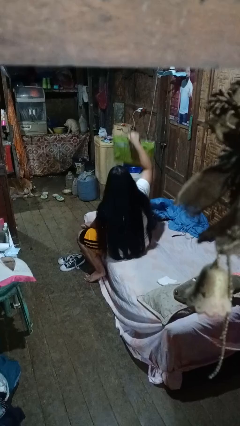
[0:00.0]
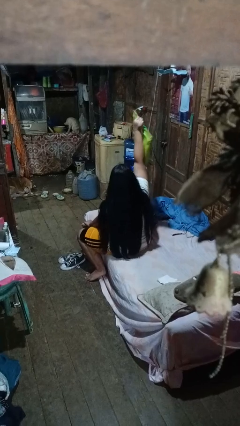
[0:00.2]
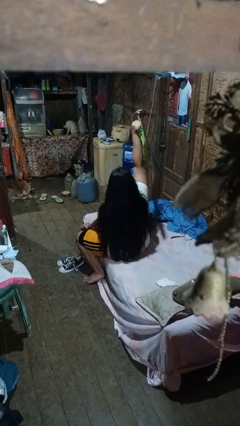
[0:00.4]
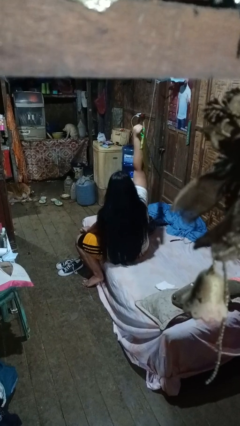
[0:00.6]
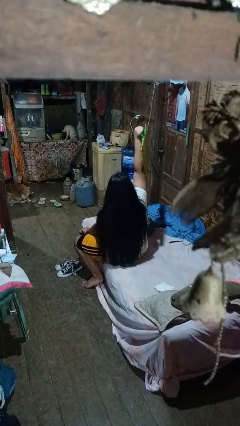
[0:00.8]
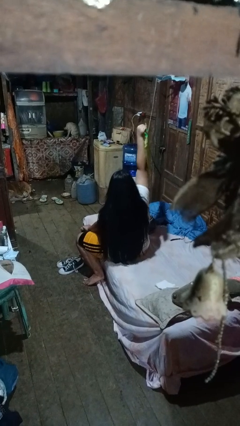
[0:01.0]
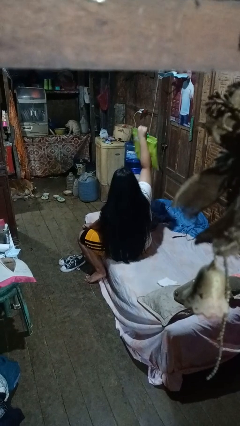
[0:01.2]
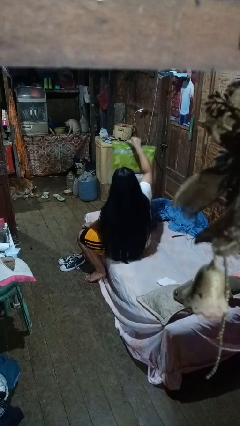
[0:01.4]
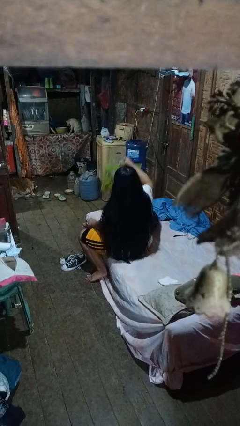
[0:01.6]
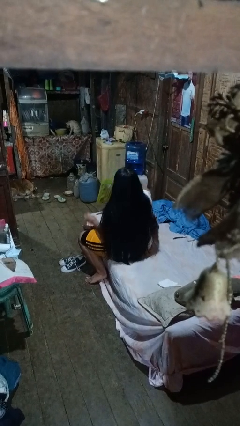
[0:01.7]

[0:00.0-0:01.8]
person holds object above head

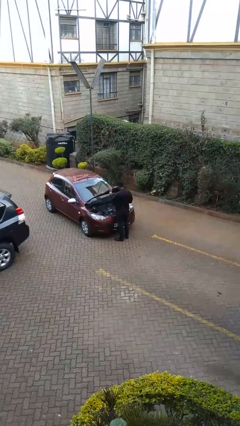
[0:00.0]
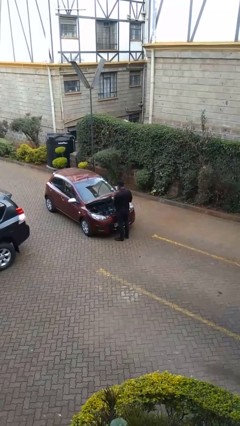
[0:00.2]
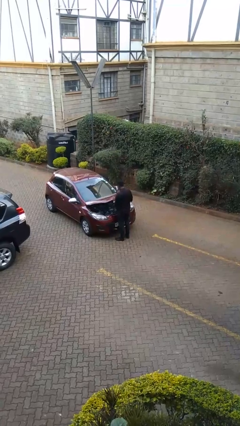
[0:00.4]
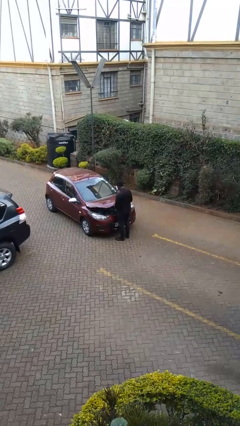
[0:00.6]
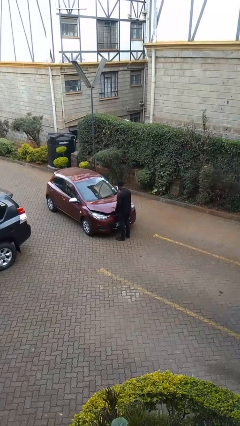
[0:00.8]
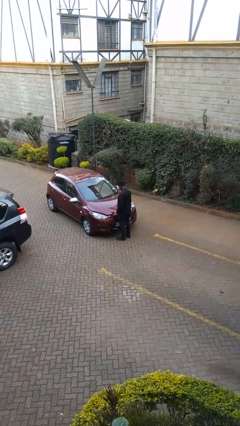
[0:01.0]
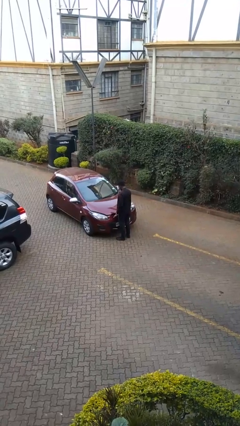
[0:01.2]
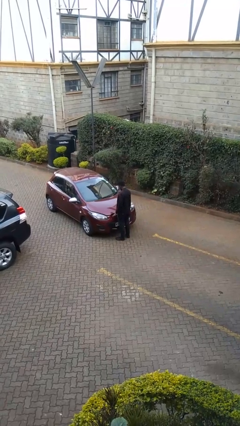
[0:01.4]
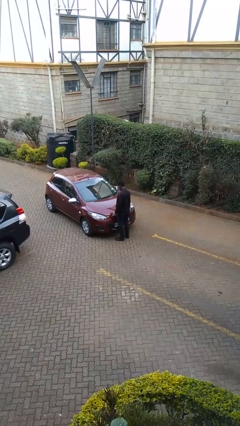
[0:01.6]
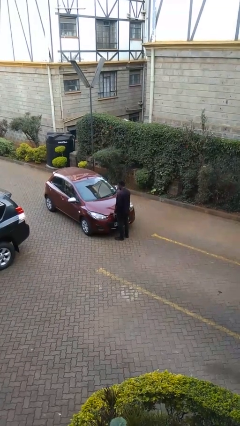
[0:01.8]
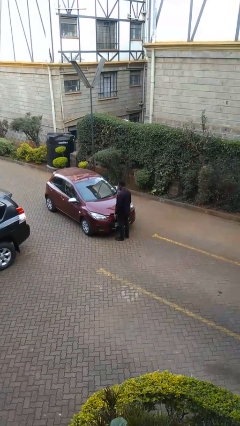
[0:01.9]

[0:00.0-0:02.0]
person closes car hood

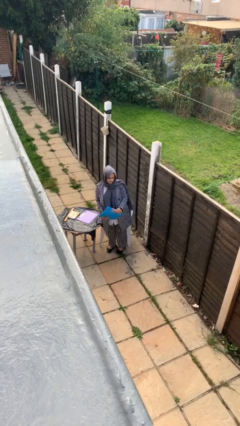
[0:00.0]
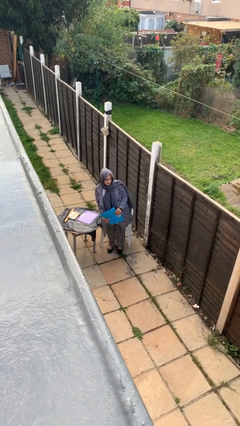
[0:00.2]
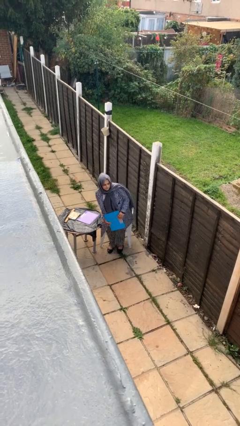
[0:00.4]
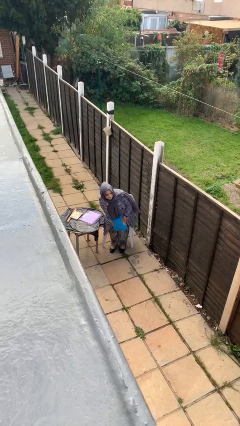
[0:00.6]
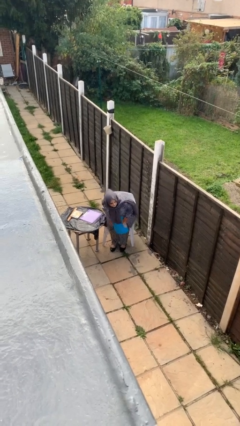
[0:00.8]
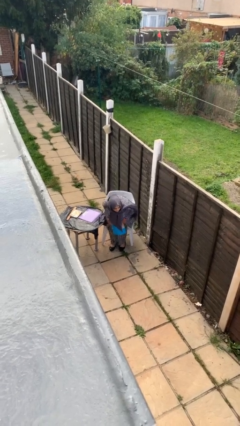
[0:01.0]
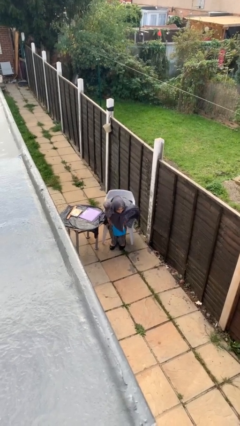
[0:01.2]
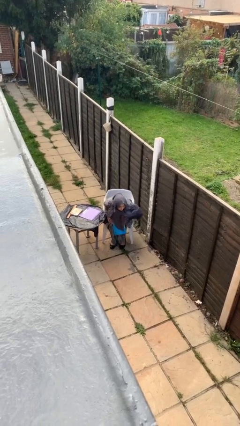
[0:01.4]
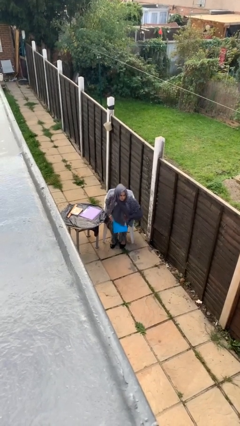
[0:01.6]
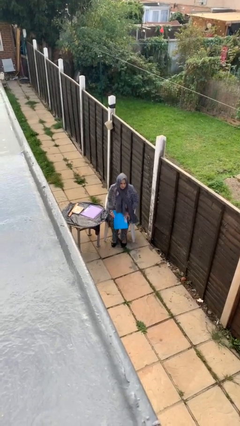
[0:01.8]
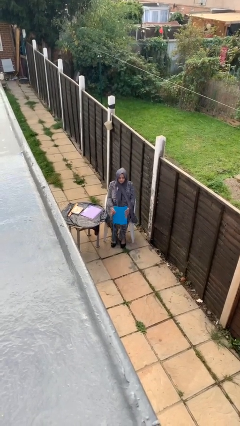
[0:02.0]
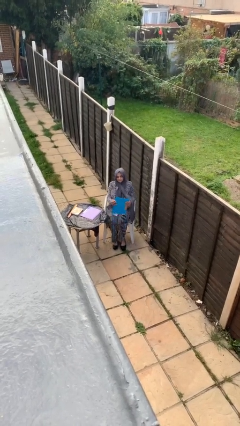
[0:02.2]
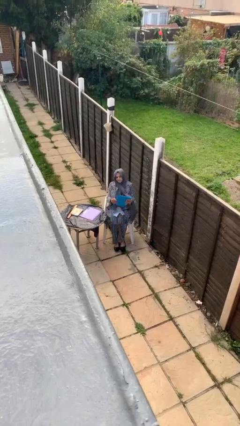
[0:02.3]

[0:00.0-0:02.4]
person sits down

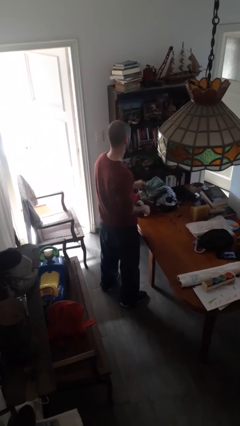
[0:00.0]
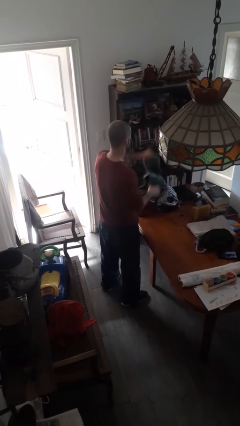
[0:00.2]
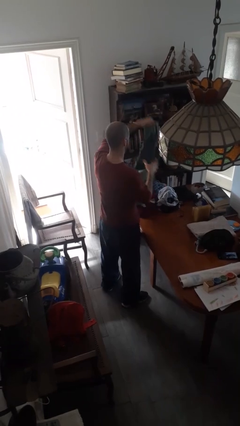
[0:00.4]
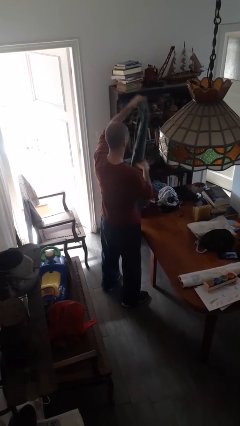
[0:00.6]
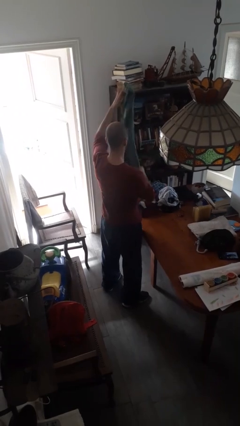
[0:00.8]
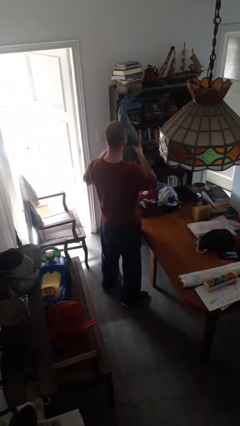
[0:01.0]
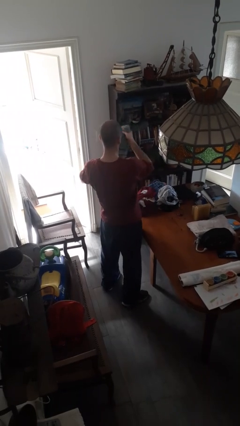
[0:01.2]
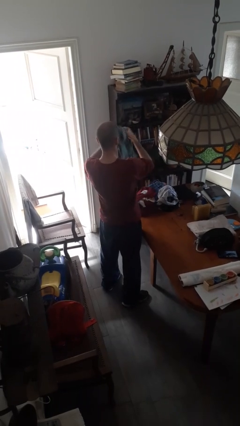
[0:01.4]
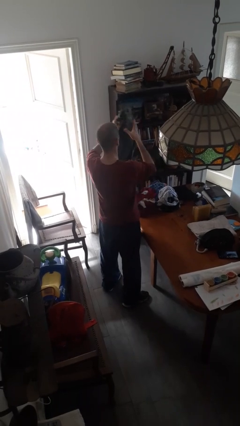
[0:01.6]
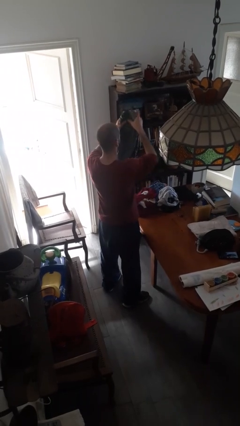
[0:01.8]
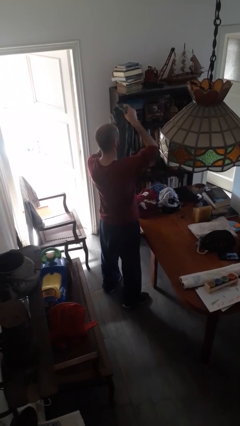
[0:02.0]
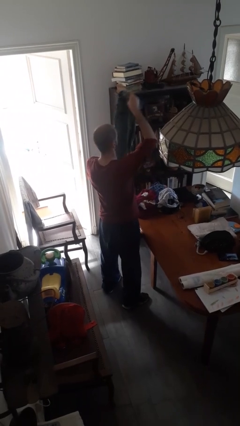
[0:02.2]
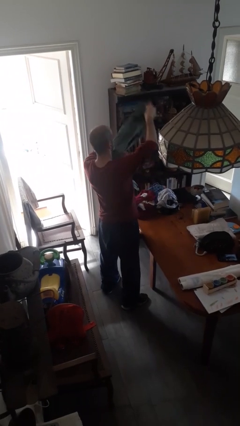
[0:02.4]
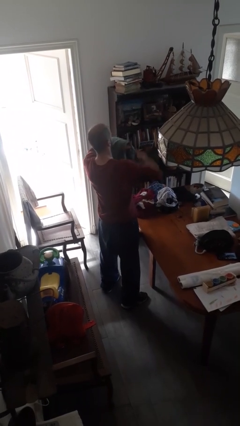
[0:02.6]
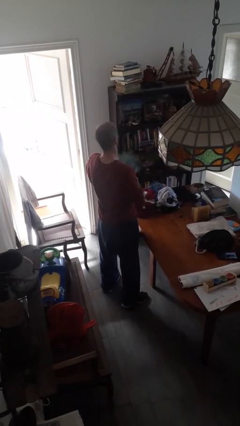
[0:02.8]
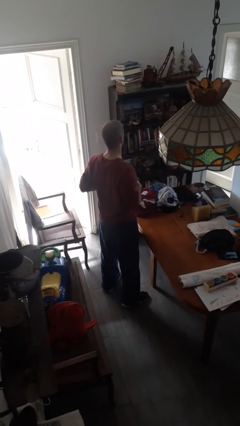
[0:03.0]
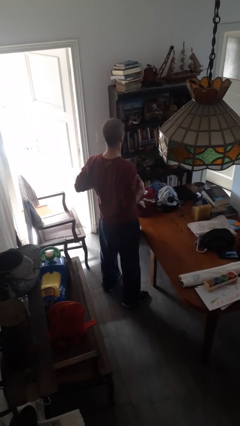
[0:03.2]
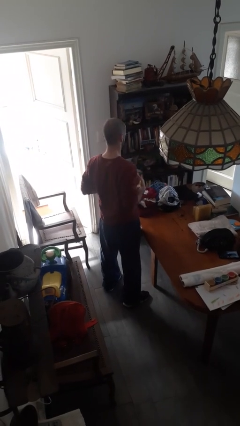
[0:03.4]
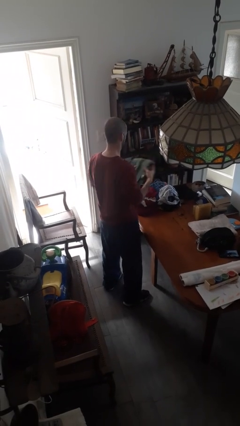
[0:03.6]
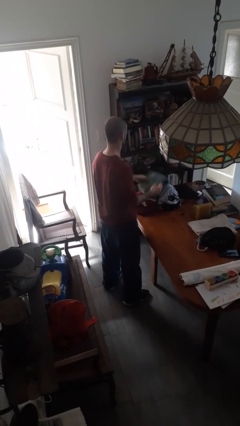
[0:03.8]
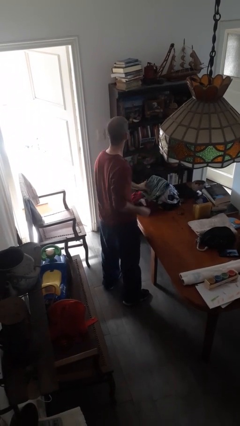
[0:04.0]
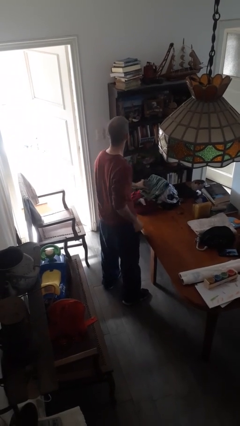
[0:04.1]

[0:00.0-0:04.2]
person folds pants

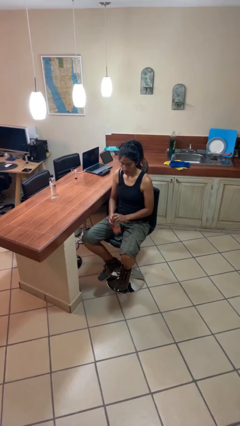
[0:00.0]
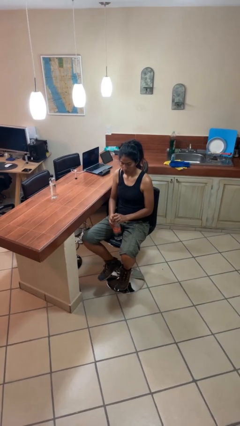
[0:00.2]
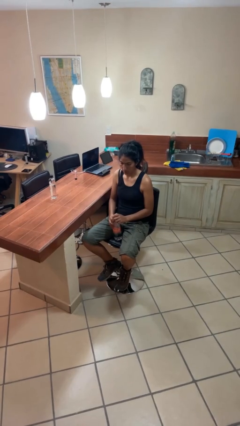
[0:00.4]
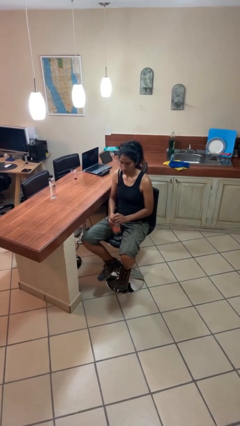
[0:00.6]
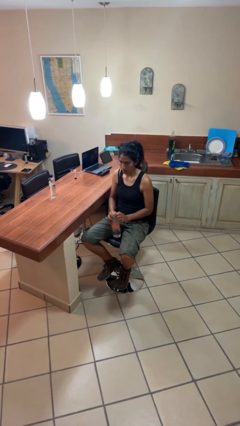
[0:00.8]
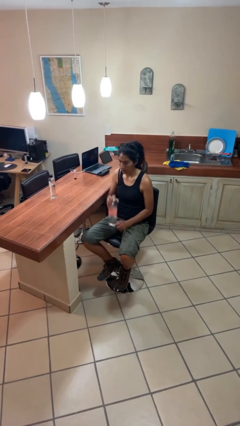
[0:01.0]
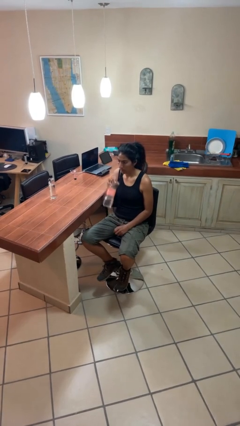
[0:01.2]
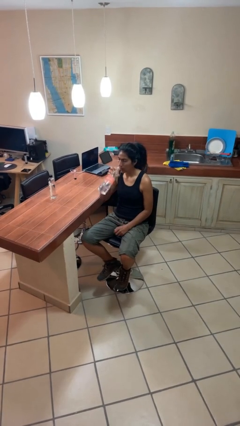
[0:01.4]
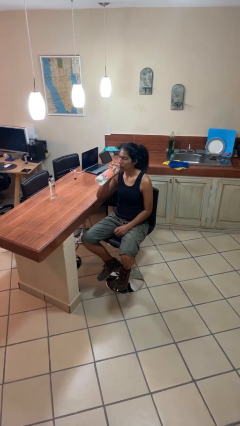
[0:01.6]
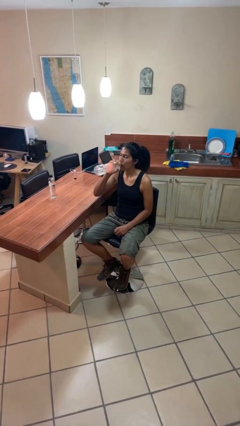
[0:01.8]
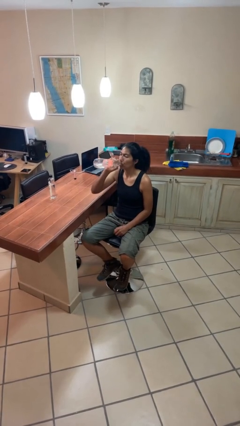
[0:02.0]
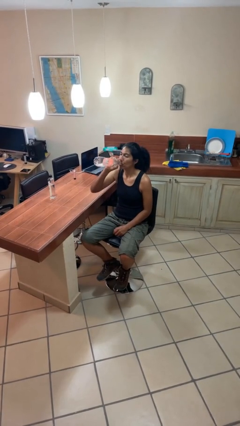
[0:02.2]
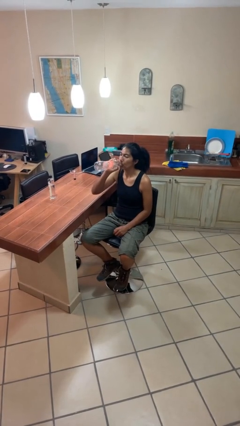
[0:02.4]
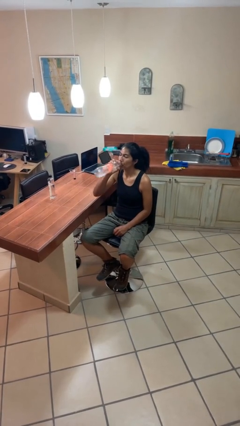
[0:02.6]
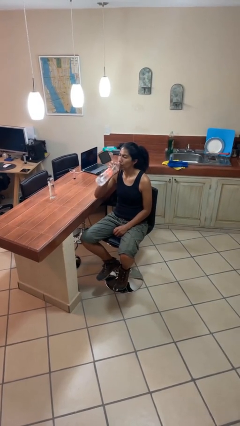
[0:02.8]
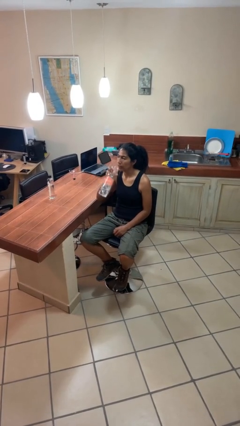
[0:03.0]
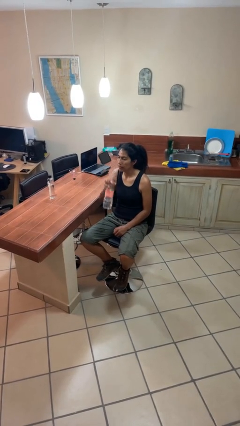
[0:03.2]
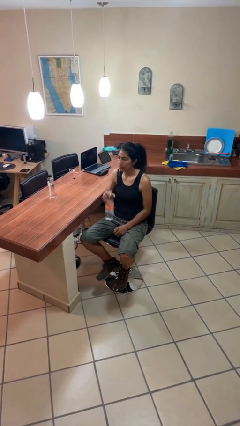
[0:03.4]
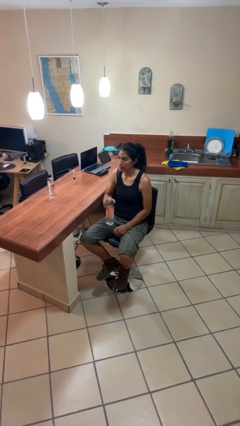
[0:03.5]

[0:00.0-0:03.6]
person drinks from bottle

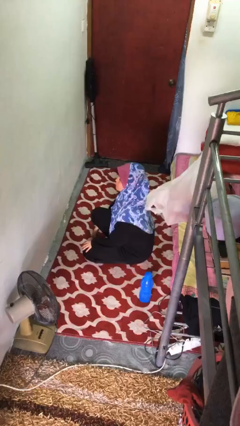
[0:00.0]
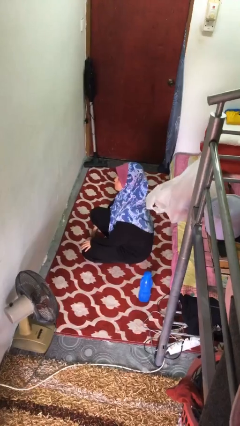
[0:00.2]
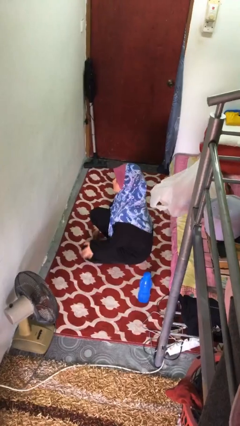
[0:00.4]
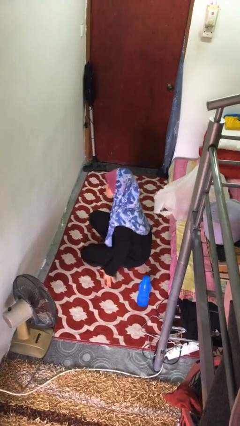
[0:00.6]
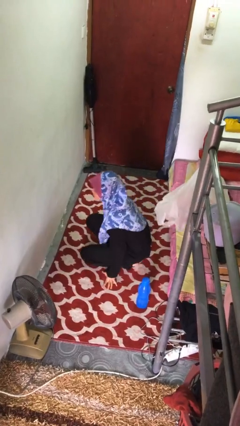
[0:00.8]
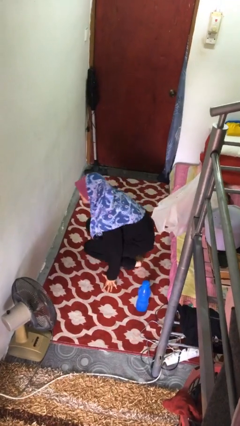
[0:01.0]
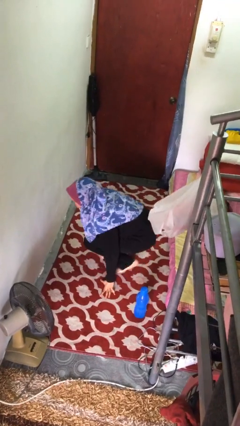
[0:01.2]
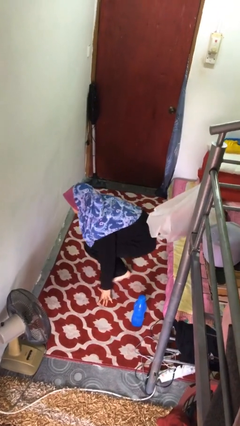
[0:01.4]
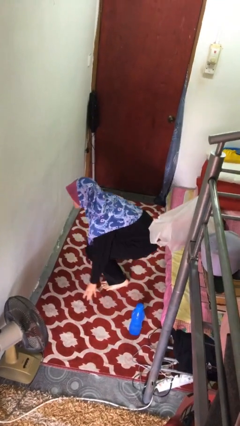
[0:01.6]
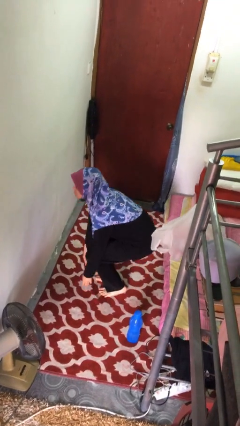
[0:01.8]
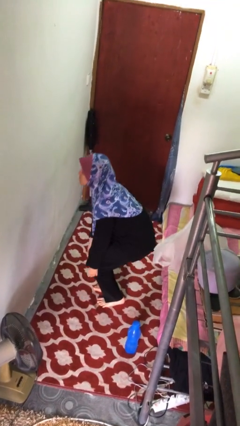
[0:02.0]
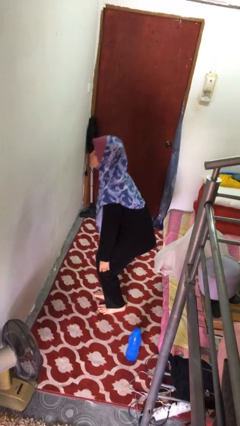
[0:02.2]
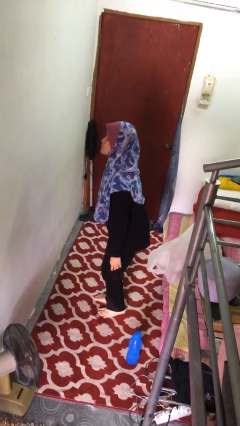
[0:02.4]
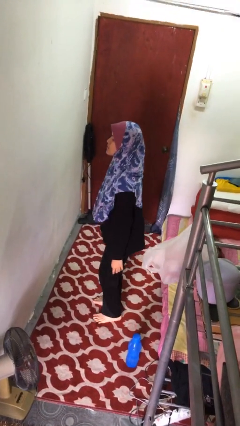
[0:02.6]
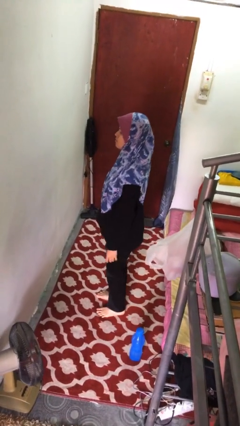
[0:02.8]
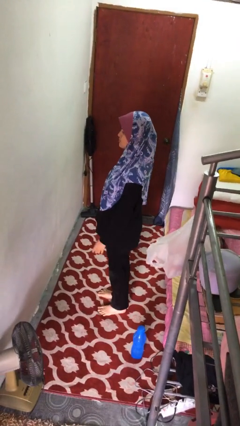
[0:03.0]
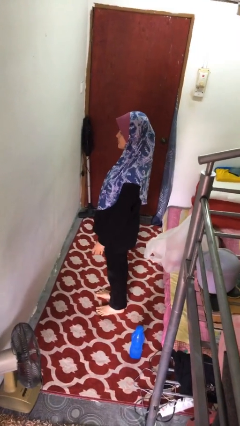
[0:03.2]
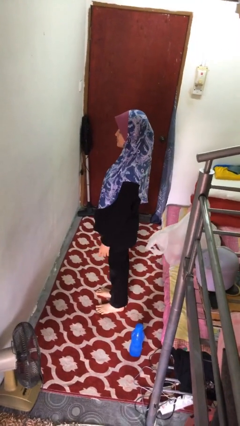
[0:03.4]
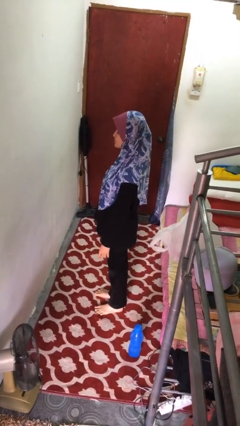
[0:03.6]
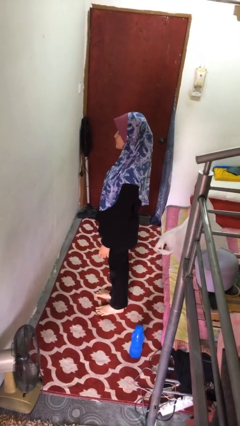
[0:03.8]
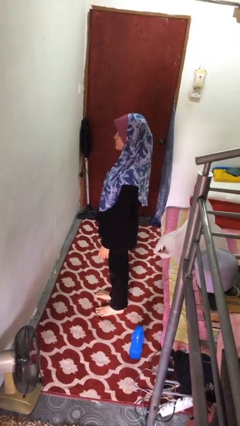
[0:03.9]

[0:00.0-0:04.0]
person stands up from floor
